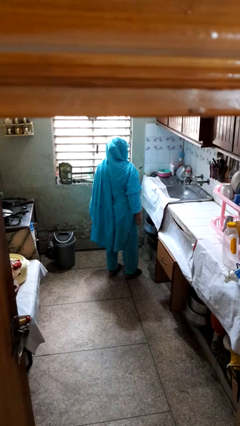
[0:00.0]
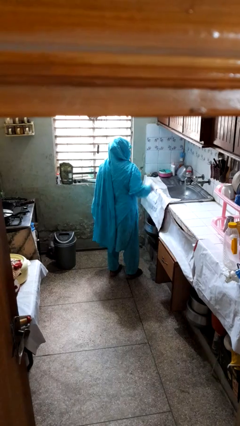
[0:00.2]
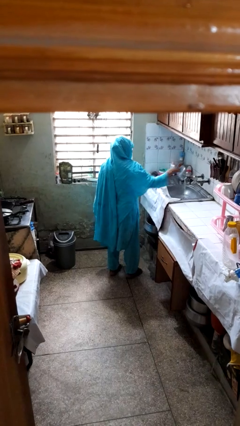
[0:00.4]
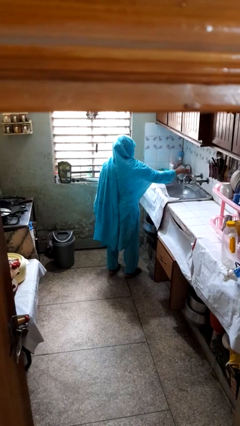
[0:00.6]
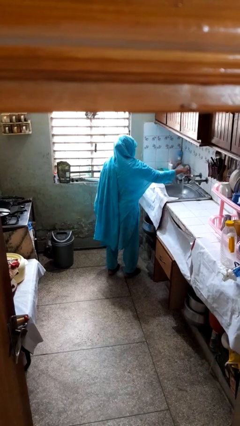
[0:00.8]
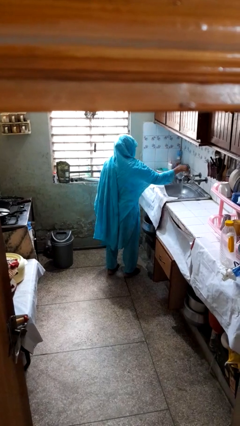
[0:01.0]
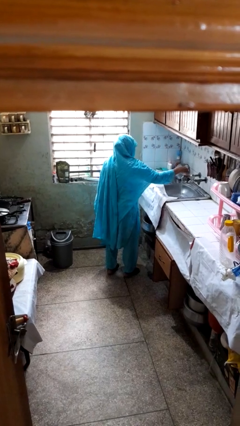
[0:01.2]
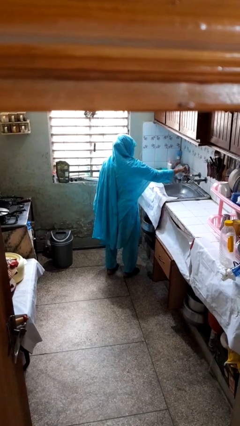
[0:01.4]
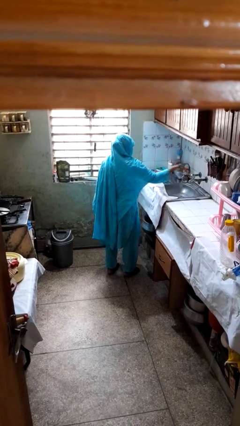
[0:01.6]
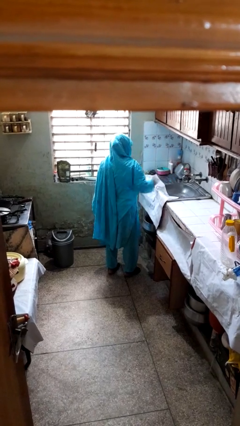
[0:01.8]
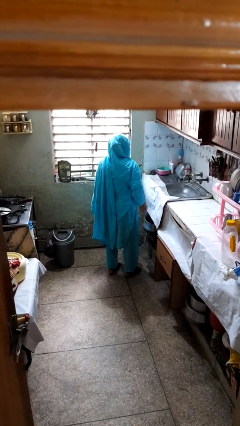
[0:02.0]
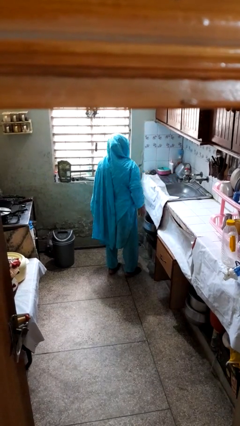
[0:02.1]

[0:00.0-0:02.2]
person turns off faucet

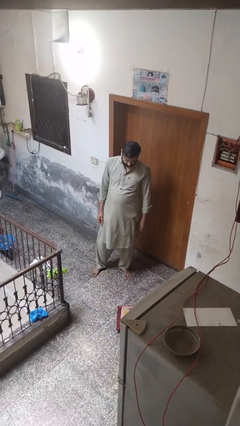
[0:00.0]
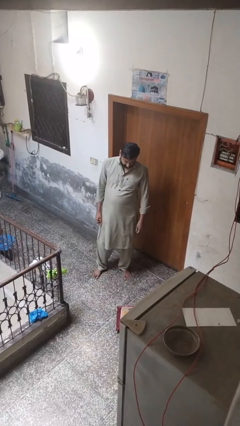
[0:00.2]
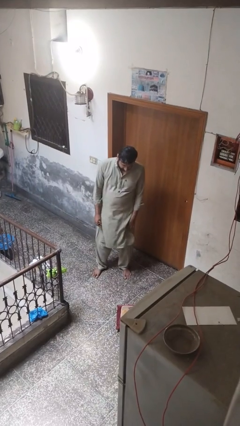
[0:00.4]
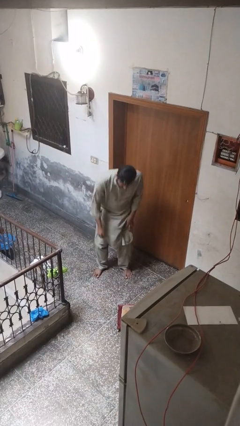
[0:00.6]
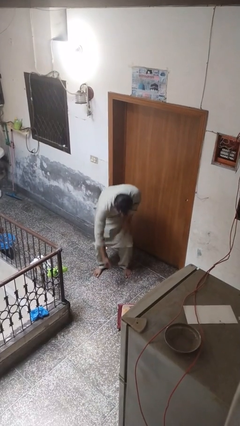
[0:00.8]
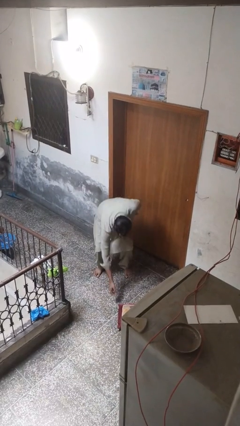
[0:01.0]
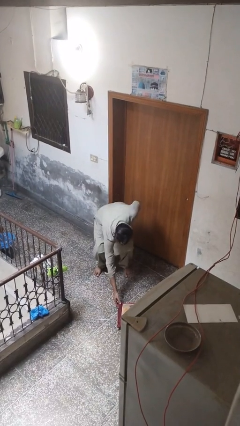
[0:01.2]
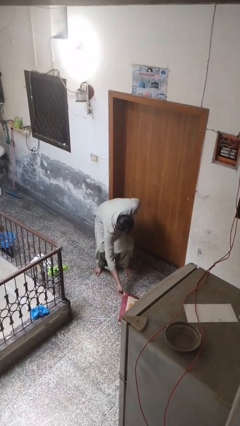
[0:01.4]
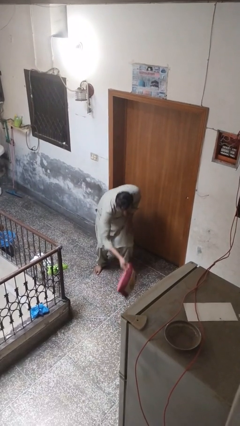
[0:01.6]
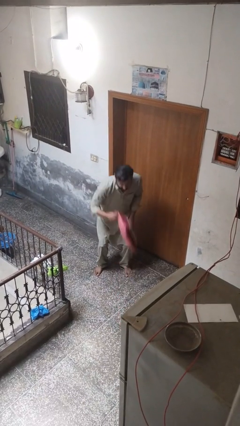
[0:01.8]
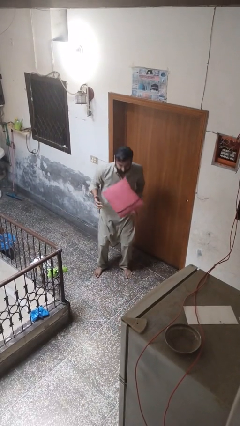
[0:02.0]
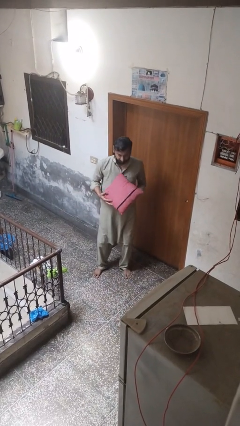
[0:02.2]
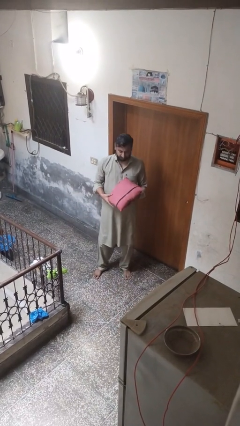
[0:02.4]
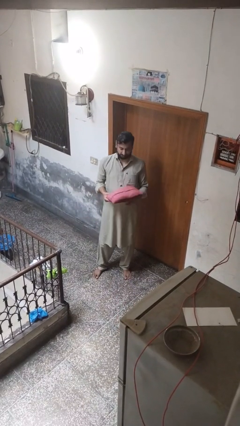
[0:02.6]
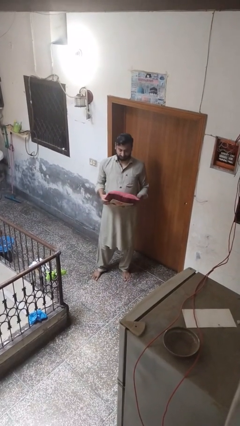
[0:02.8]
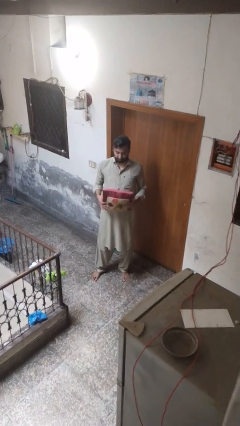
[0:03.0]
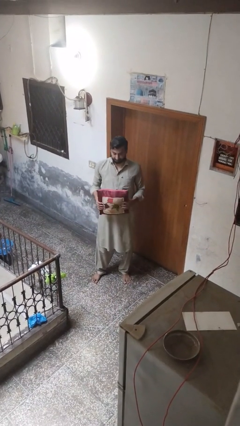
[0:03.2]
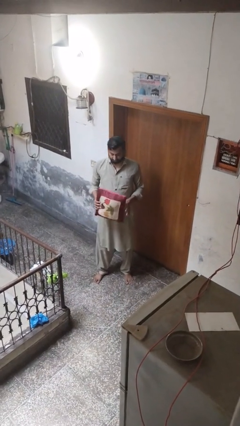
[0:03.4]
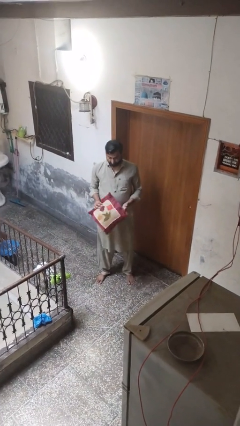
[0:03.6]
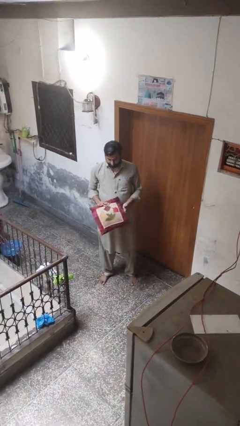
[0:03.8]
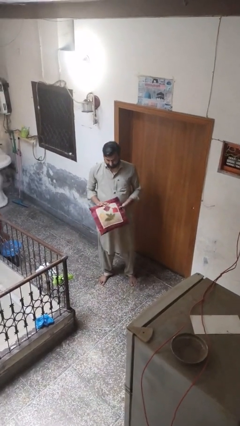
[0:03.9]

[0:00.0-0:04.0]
person picks up object from floor

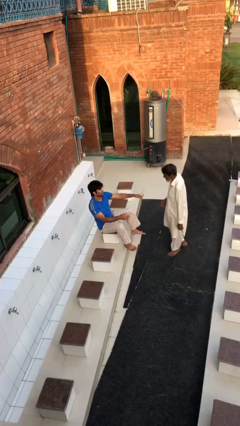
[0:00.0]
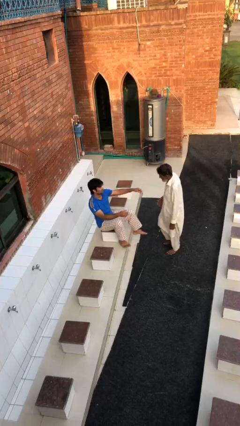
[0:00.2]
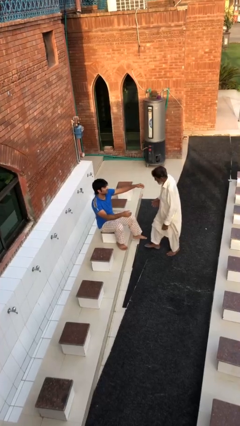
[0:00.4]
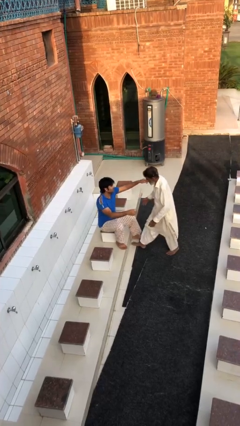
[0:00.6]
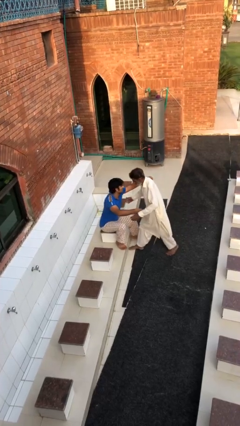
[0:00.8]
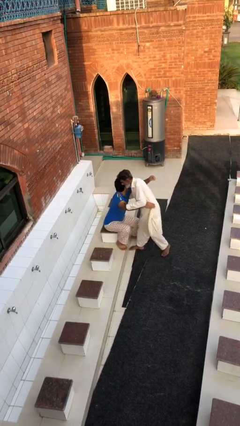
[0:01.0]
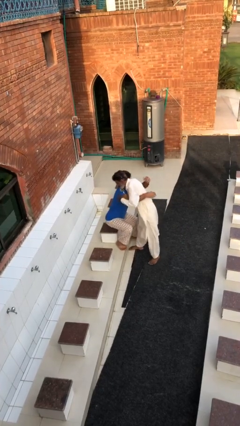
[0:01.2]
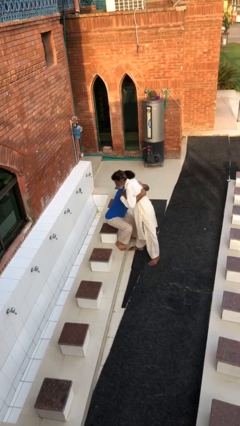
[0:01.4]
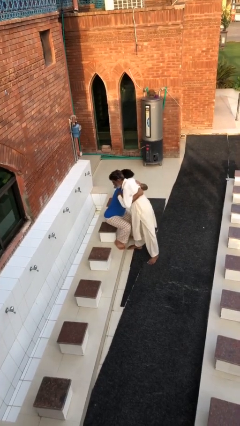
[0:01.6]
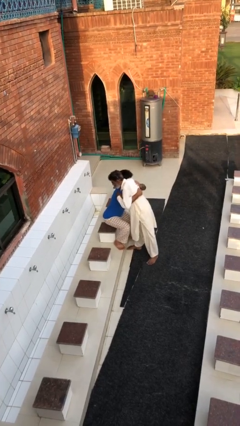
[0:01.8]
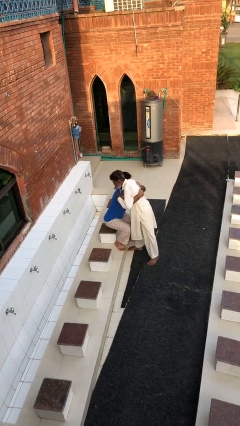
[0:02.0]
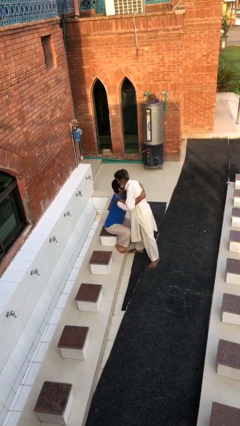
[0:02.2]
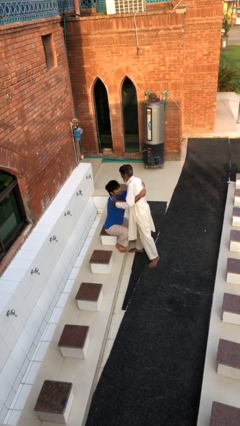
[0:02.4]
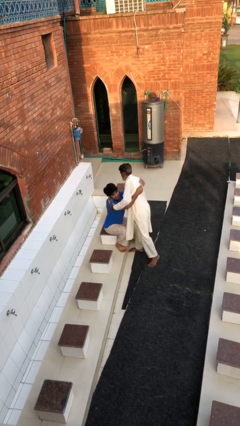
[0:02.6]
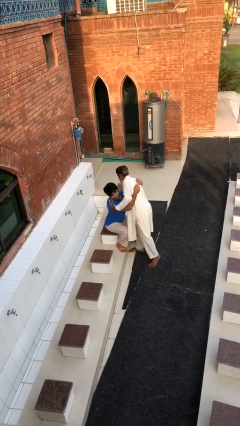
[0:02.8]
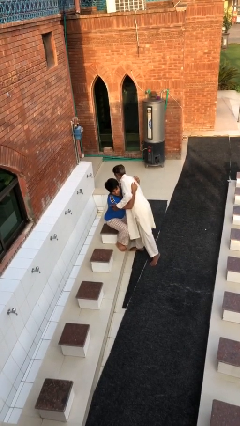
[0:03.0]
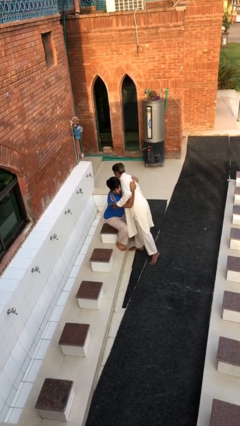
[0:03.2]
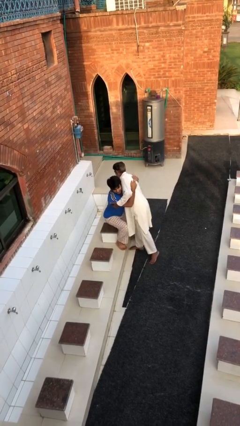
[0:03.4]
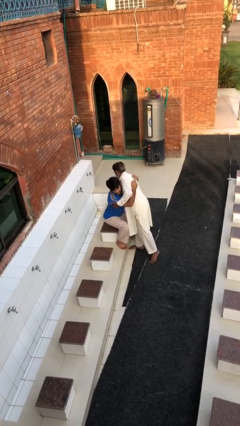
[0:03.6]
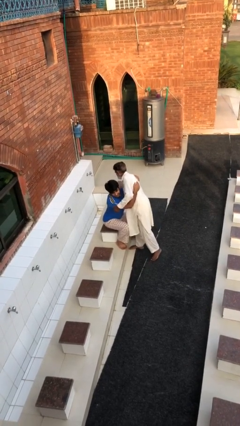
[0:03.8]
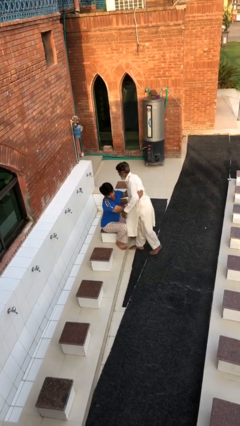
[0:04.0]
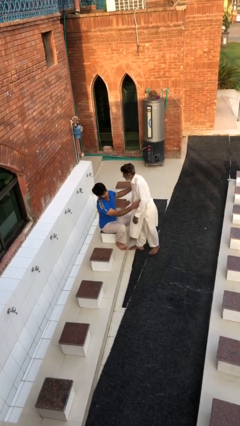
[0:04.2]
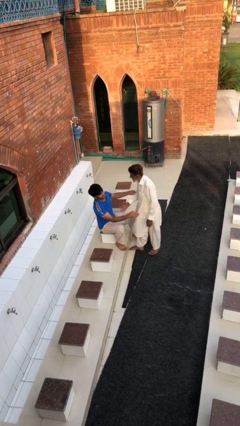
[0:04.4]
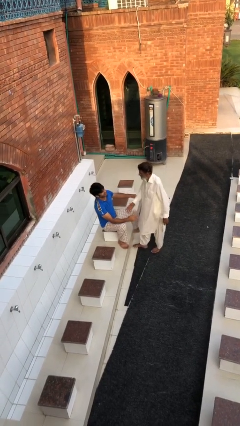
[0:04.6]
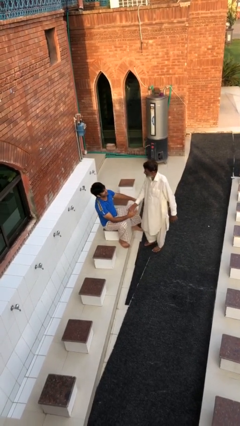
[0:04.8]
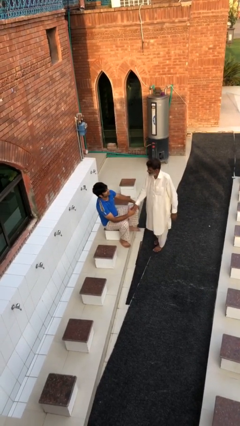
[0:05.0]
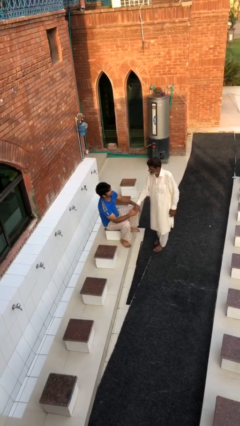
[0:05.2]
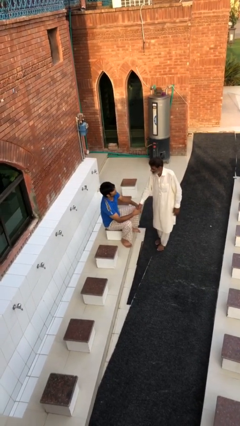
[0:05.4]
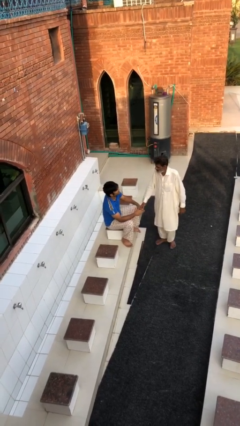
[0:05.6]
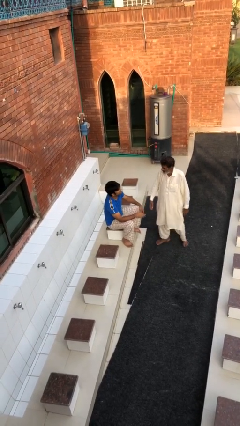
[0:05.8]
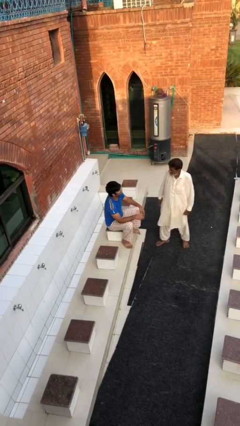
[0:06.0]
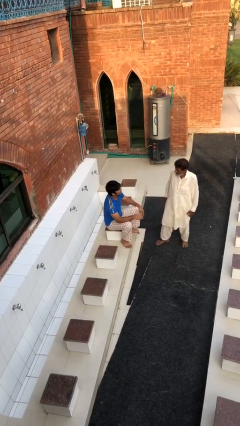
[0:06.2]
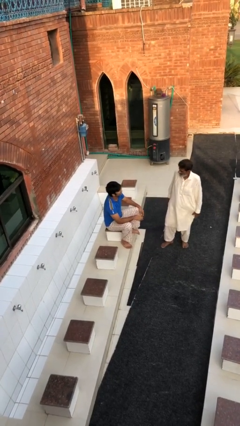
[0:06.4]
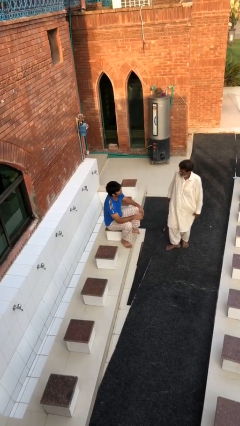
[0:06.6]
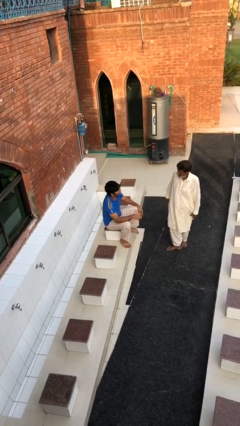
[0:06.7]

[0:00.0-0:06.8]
person embraces person

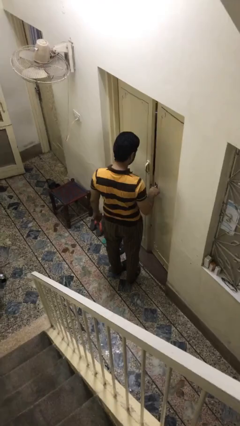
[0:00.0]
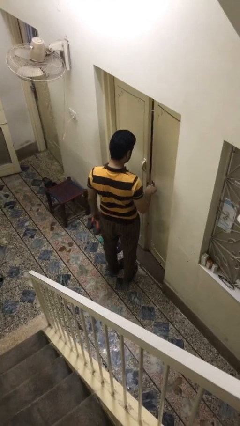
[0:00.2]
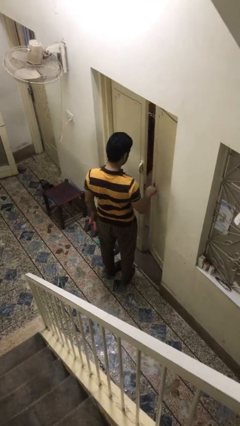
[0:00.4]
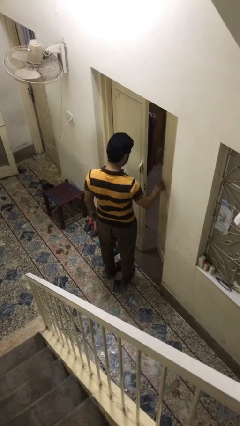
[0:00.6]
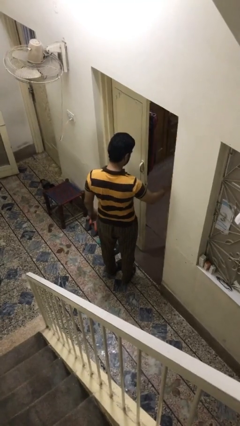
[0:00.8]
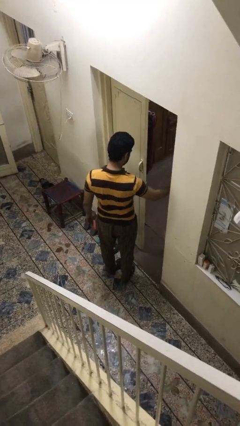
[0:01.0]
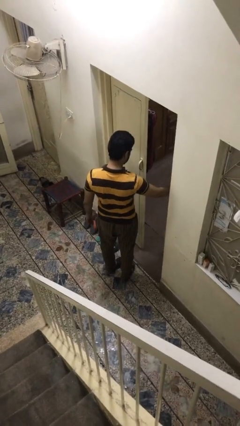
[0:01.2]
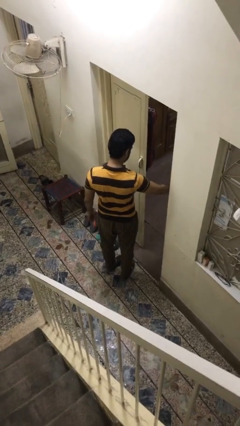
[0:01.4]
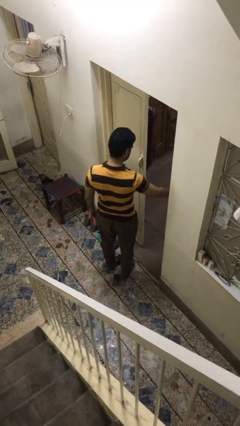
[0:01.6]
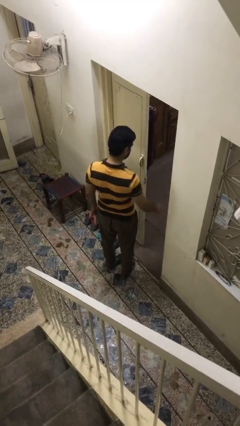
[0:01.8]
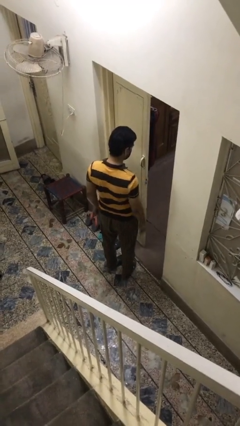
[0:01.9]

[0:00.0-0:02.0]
person opens facility door

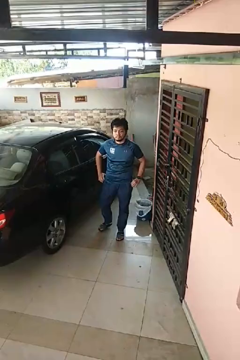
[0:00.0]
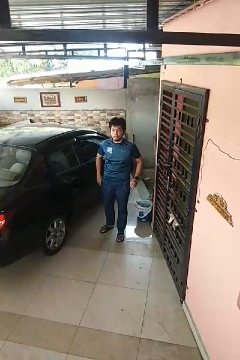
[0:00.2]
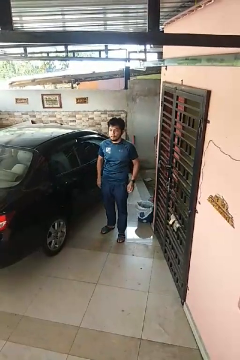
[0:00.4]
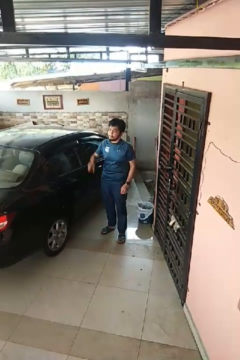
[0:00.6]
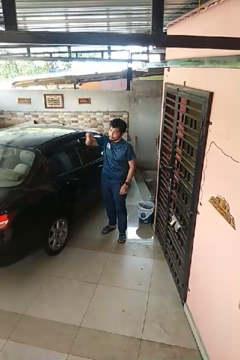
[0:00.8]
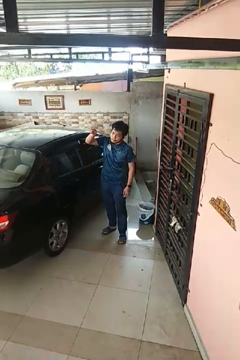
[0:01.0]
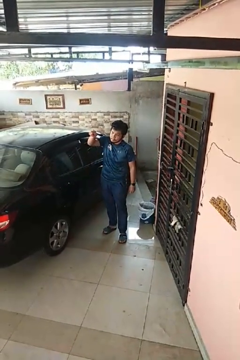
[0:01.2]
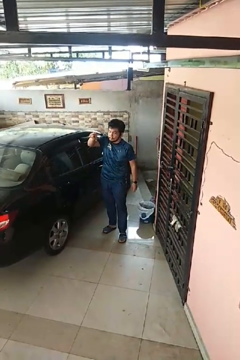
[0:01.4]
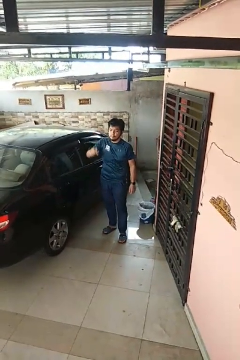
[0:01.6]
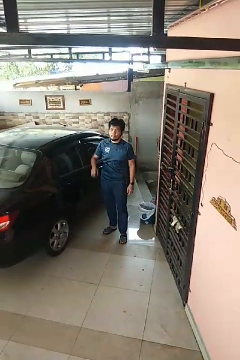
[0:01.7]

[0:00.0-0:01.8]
person points at person

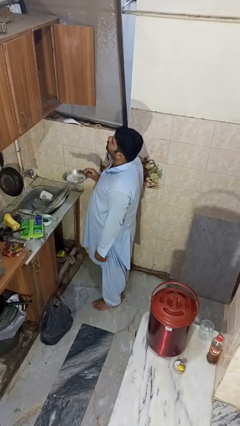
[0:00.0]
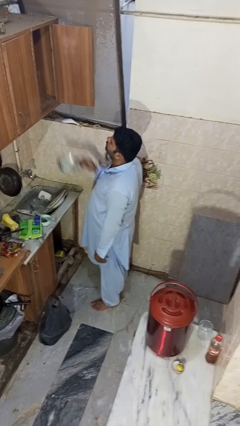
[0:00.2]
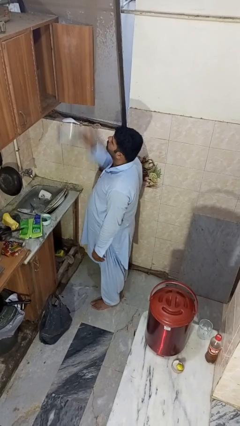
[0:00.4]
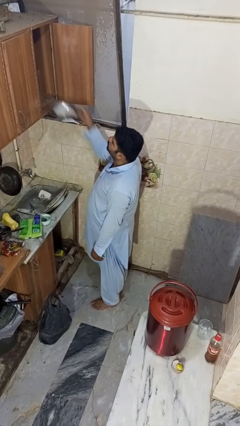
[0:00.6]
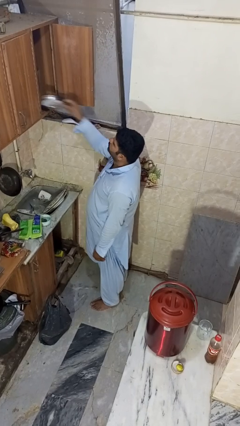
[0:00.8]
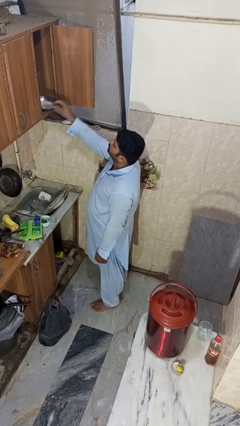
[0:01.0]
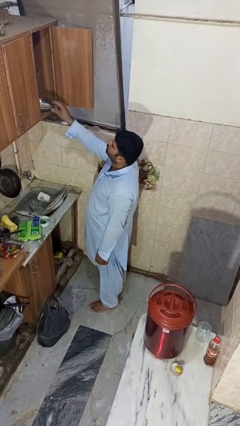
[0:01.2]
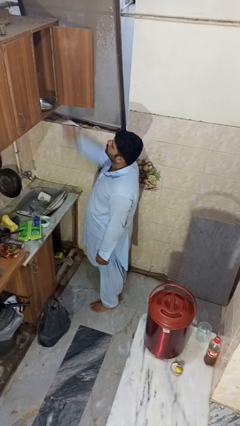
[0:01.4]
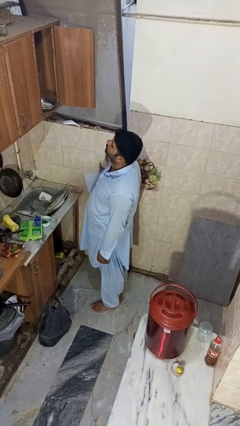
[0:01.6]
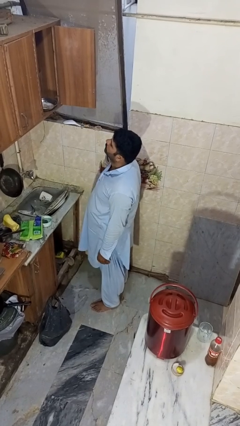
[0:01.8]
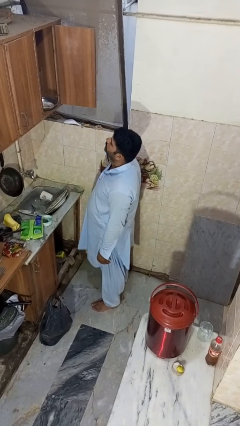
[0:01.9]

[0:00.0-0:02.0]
person puts object in cabinet